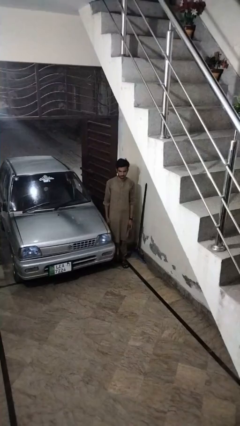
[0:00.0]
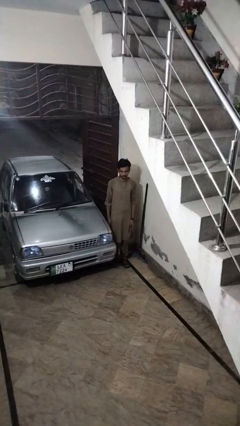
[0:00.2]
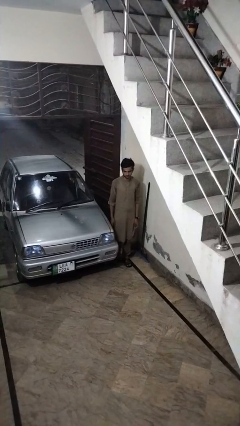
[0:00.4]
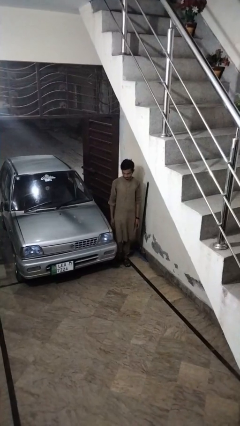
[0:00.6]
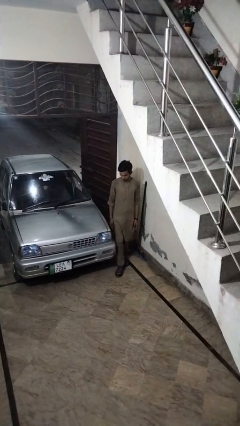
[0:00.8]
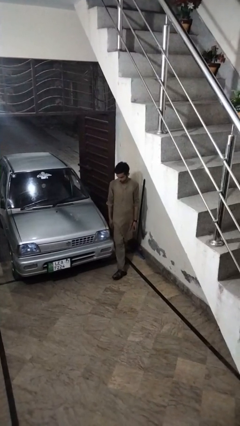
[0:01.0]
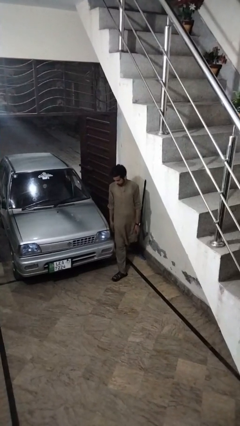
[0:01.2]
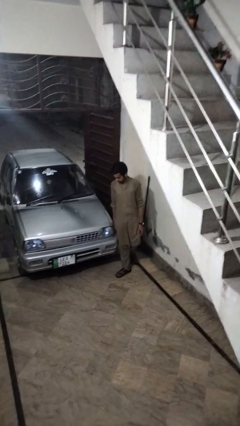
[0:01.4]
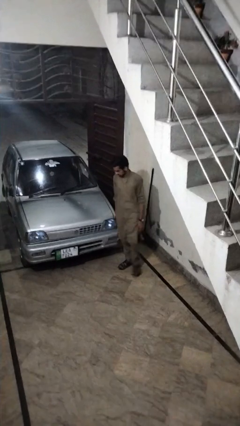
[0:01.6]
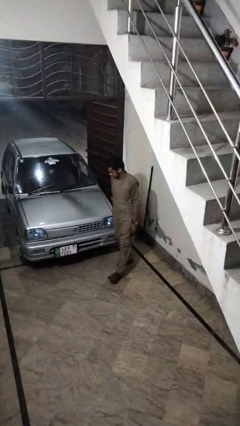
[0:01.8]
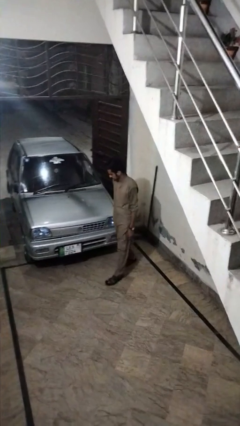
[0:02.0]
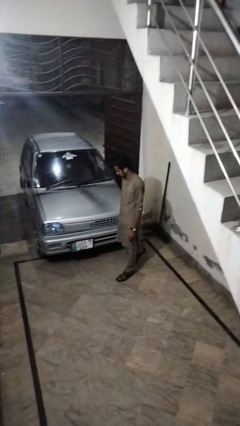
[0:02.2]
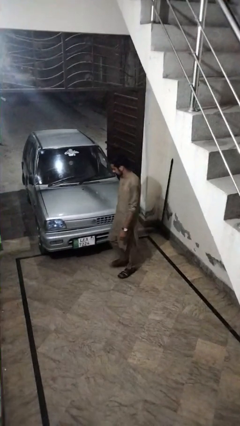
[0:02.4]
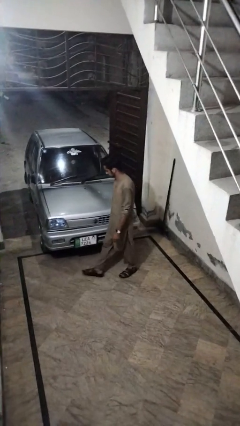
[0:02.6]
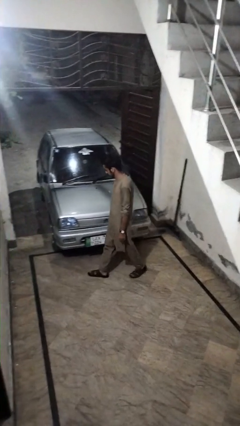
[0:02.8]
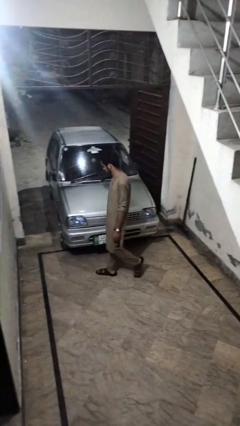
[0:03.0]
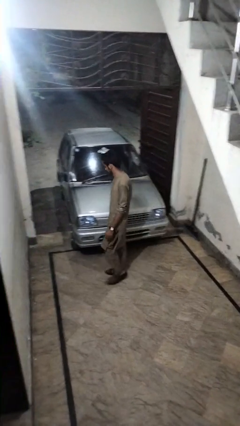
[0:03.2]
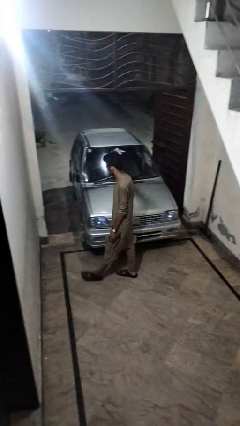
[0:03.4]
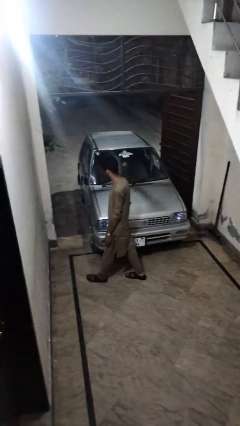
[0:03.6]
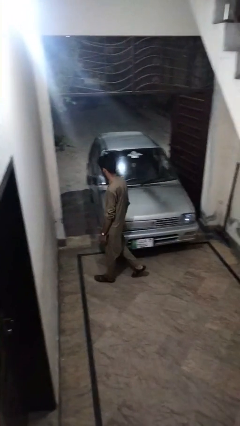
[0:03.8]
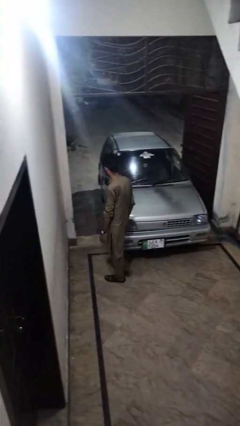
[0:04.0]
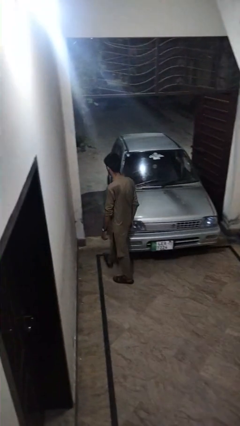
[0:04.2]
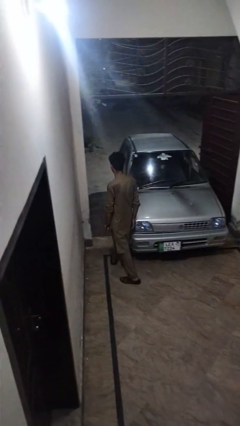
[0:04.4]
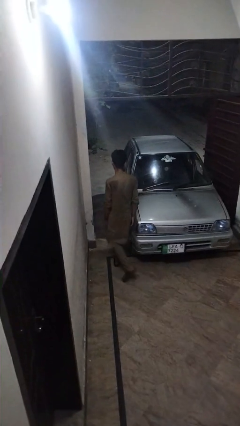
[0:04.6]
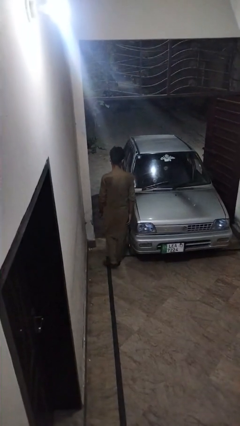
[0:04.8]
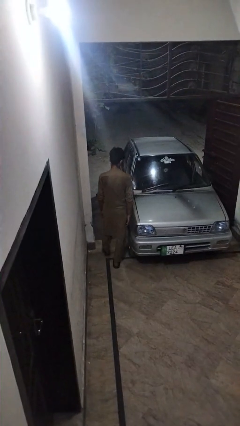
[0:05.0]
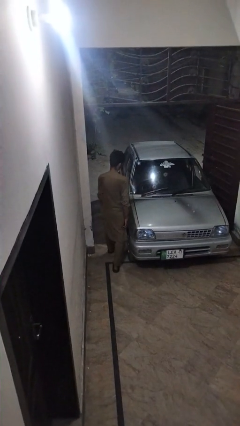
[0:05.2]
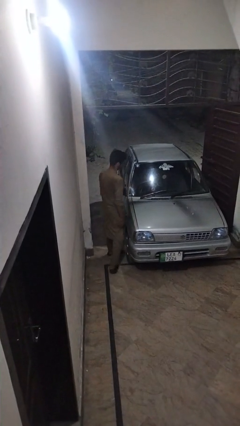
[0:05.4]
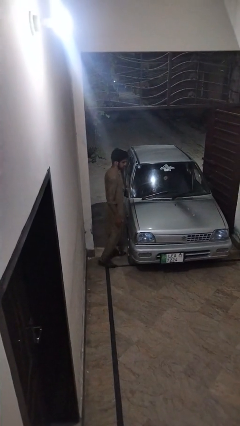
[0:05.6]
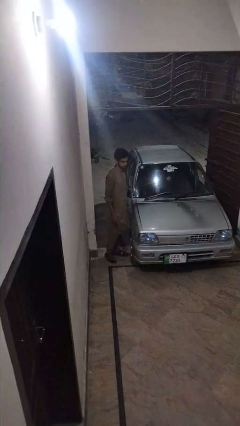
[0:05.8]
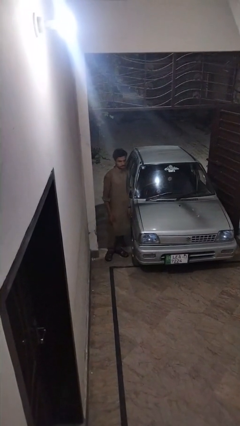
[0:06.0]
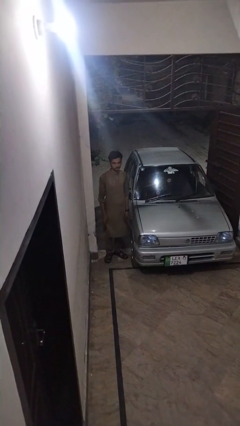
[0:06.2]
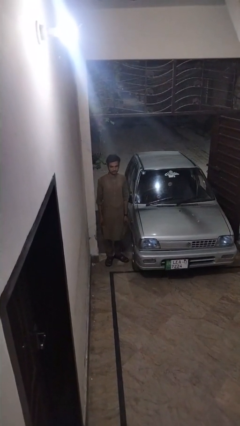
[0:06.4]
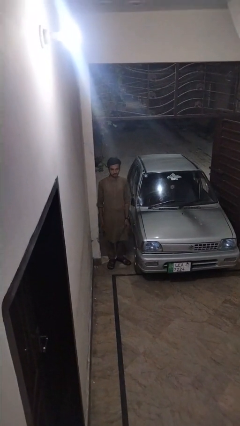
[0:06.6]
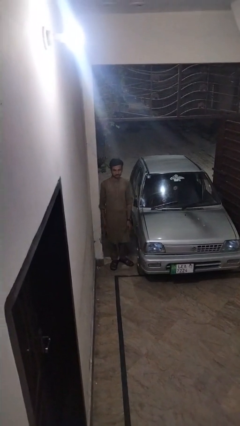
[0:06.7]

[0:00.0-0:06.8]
person walks around car

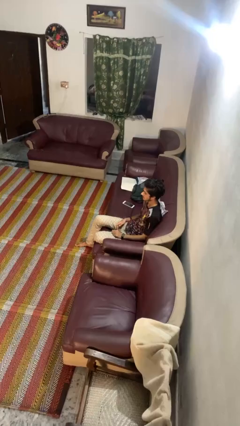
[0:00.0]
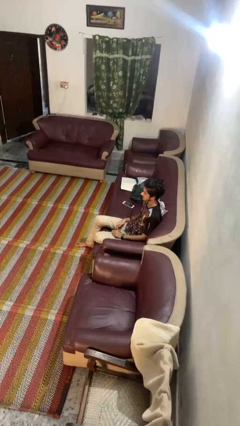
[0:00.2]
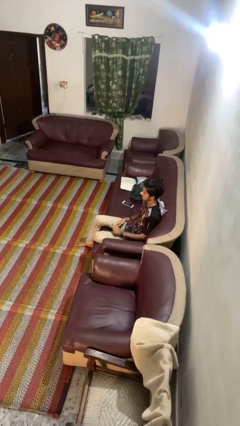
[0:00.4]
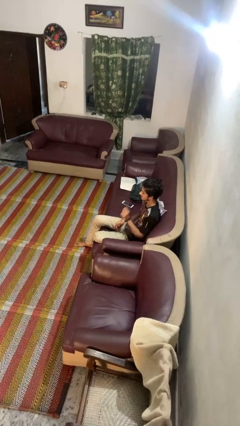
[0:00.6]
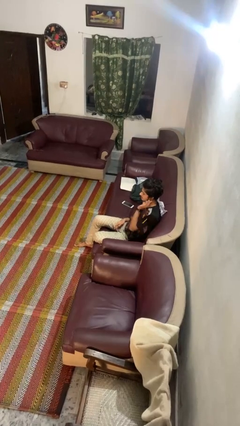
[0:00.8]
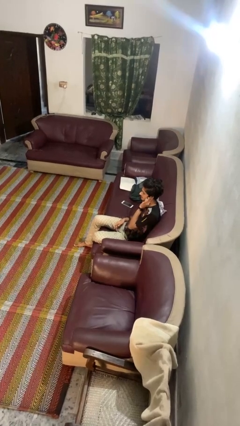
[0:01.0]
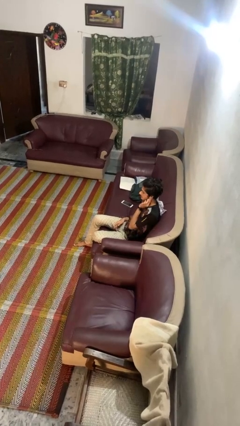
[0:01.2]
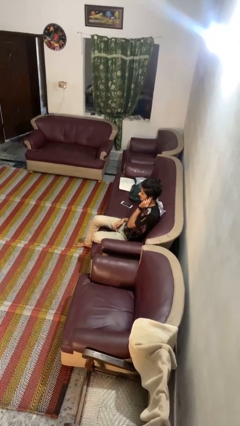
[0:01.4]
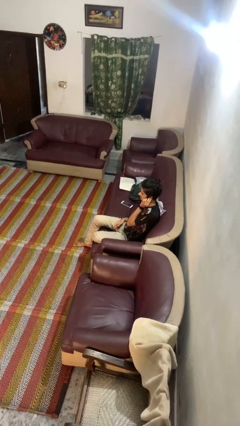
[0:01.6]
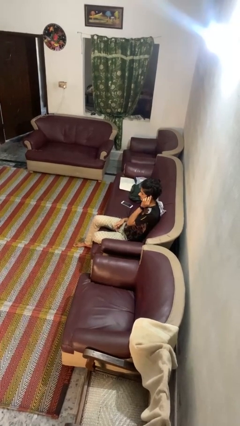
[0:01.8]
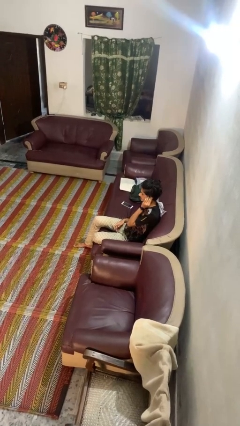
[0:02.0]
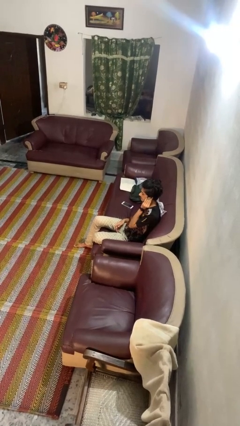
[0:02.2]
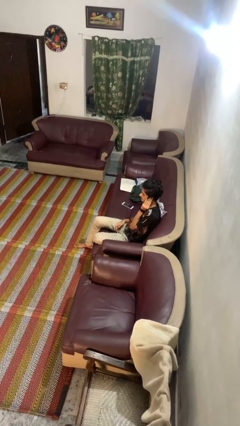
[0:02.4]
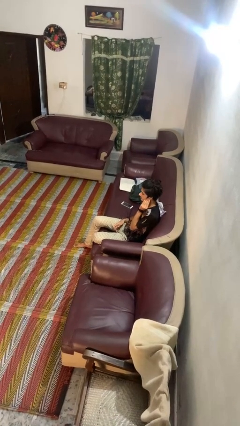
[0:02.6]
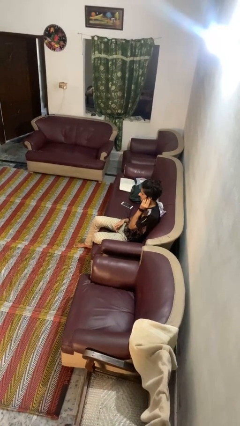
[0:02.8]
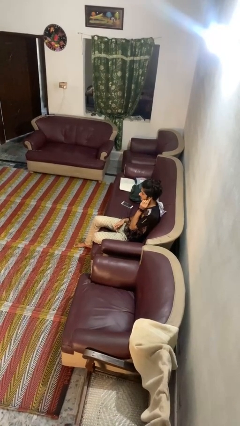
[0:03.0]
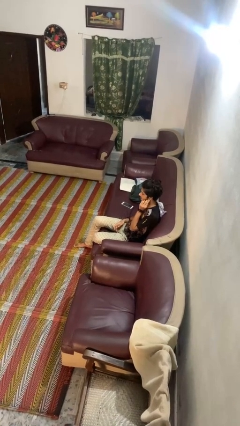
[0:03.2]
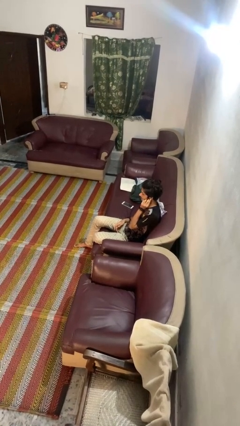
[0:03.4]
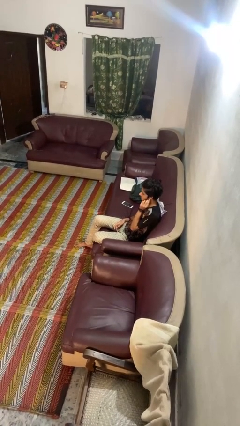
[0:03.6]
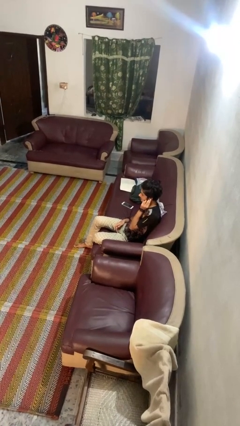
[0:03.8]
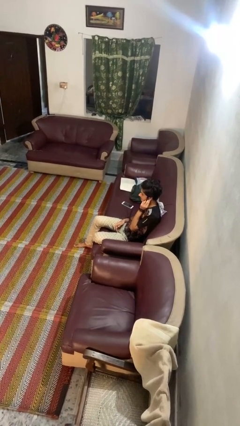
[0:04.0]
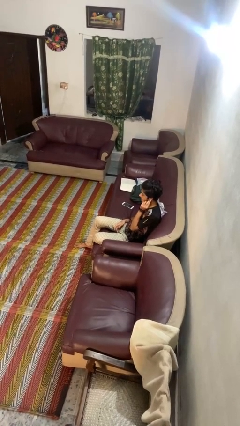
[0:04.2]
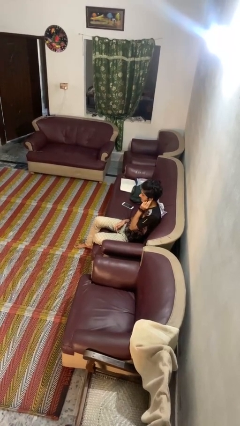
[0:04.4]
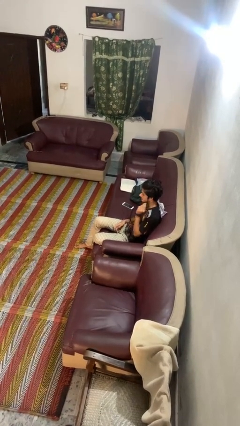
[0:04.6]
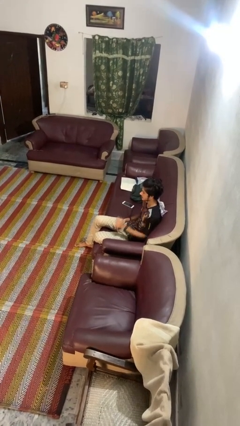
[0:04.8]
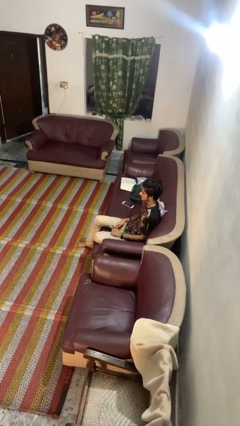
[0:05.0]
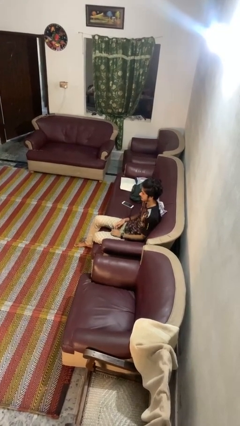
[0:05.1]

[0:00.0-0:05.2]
person touches earlobe

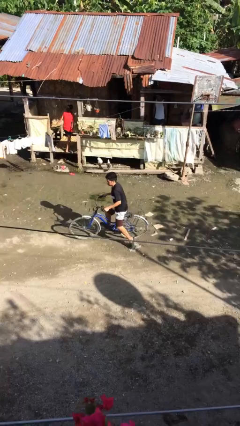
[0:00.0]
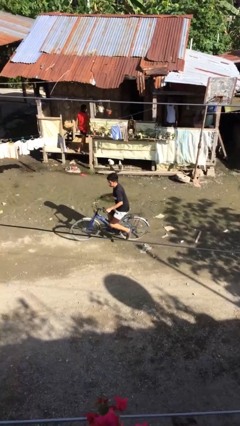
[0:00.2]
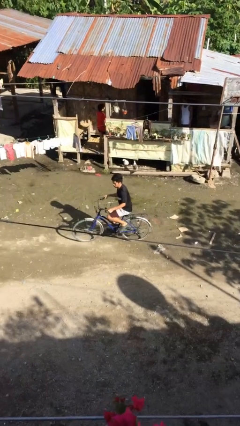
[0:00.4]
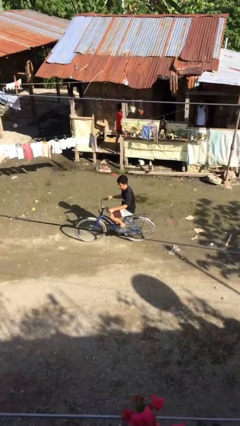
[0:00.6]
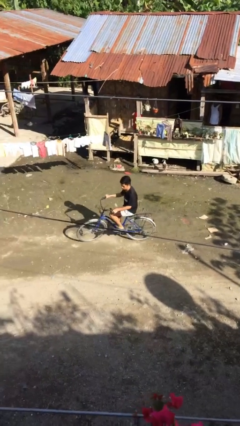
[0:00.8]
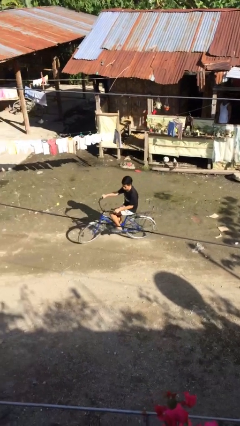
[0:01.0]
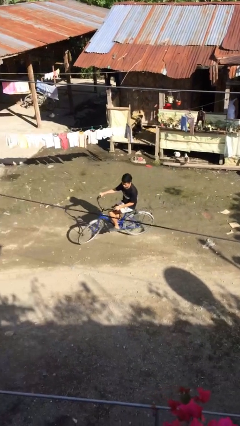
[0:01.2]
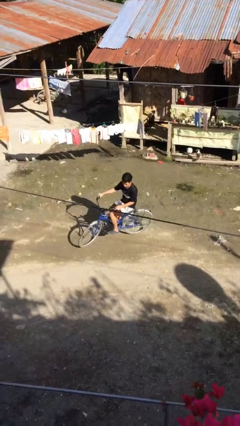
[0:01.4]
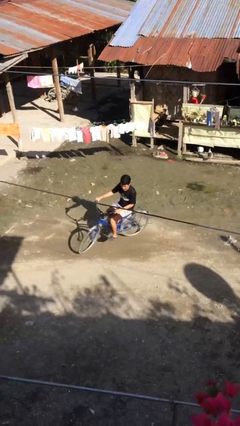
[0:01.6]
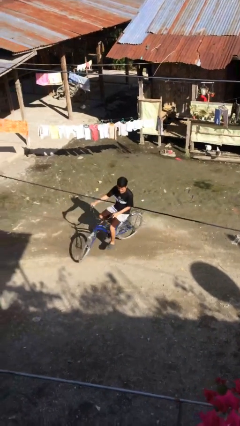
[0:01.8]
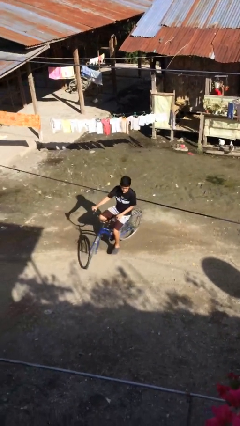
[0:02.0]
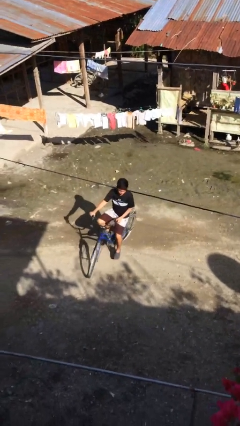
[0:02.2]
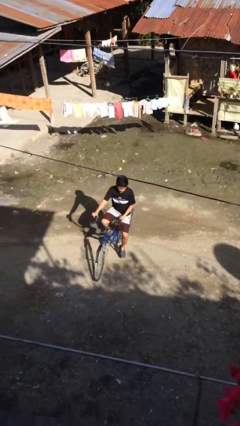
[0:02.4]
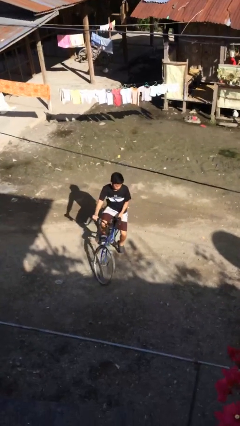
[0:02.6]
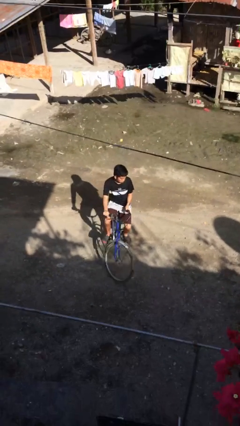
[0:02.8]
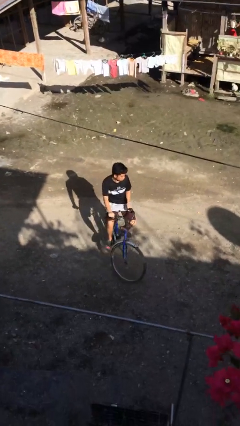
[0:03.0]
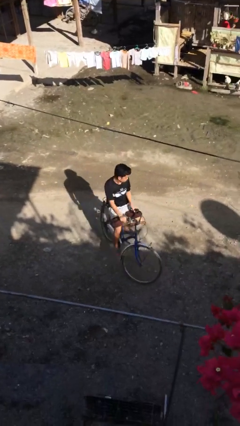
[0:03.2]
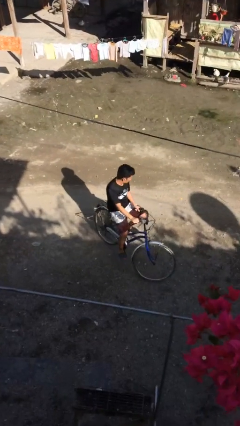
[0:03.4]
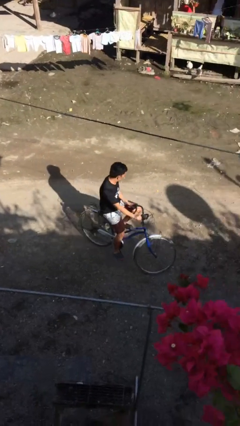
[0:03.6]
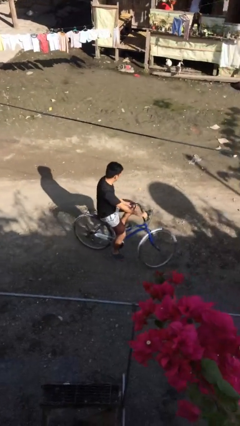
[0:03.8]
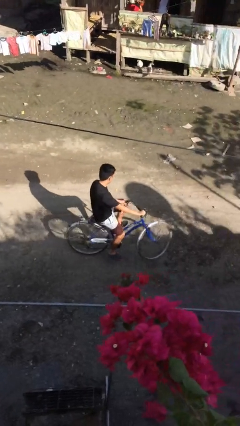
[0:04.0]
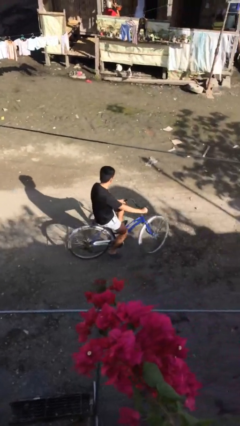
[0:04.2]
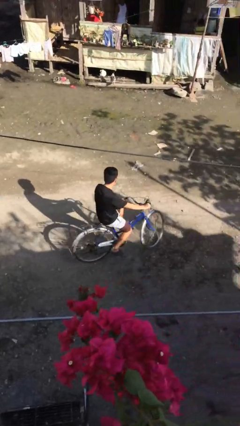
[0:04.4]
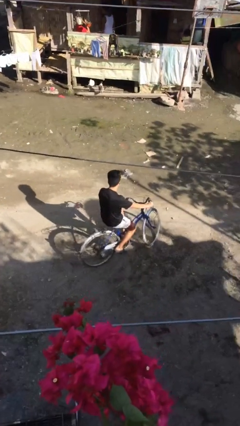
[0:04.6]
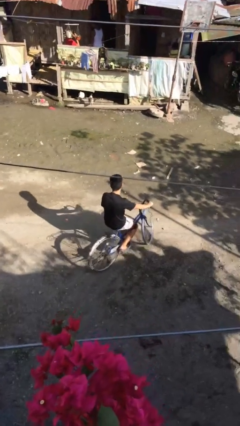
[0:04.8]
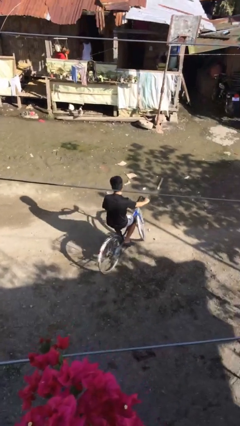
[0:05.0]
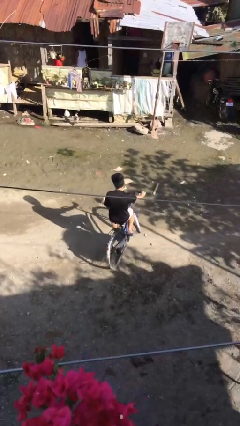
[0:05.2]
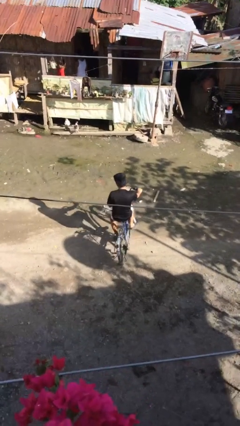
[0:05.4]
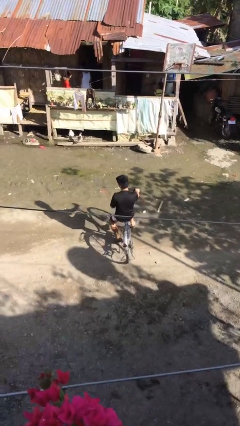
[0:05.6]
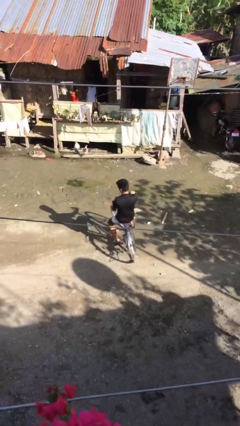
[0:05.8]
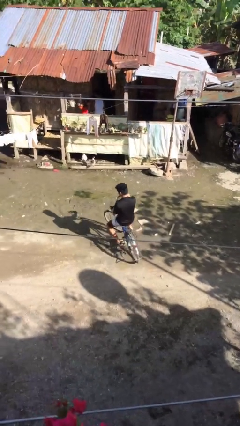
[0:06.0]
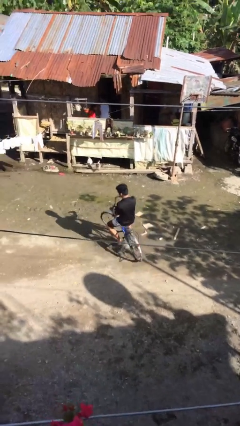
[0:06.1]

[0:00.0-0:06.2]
person rides bicycle
